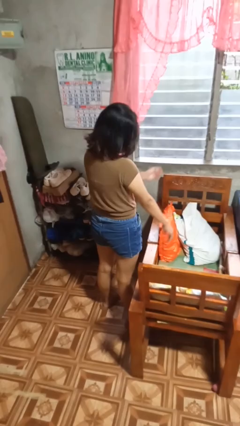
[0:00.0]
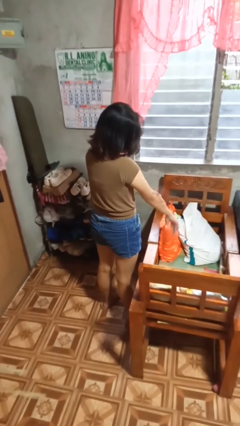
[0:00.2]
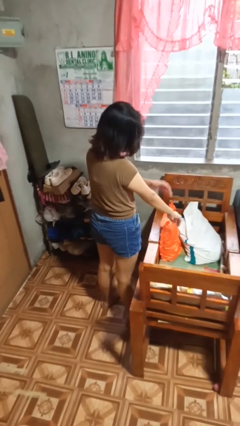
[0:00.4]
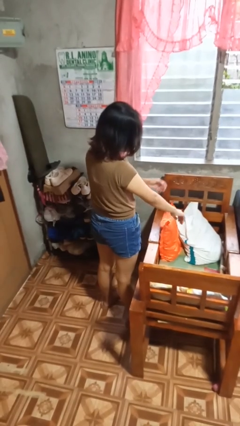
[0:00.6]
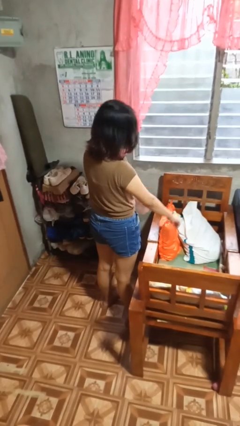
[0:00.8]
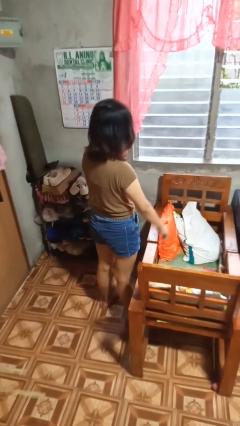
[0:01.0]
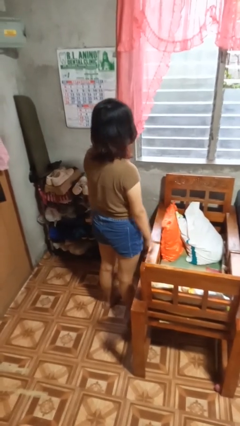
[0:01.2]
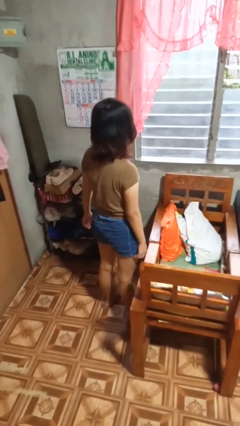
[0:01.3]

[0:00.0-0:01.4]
person swats bug

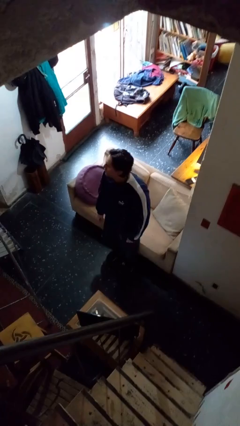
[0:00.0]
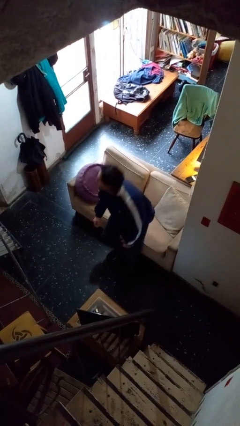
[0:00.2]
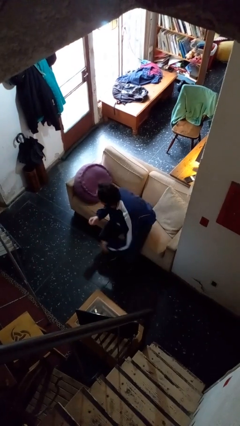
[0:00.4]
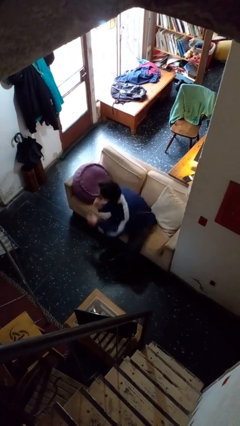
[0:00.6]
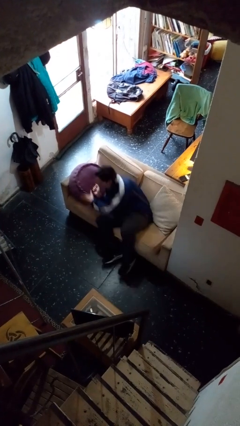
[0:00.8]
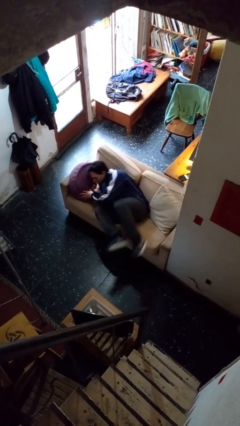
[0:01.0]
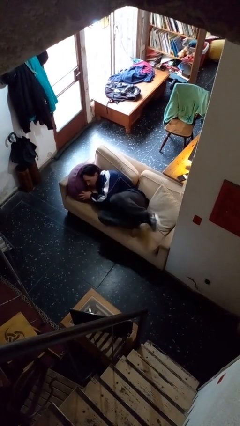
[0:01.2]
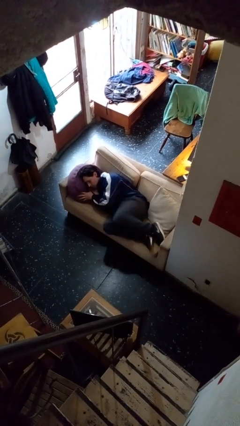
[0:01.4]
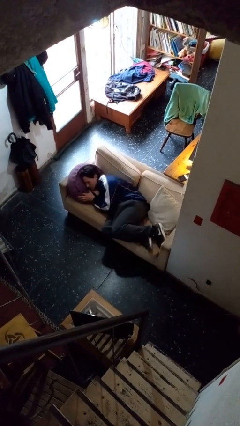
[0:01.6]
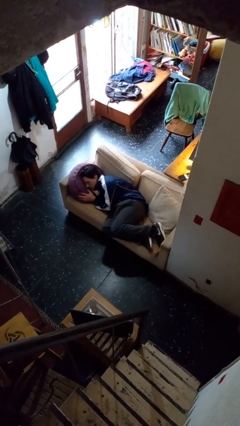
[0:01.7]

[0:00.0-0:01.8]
person lies down on couch

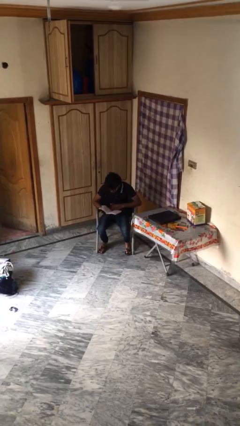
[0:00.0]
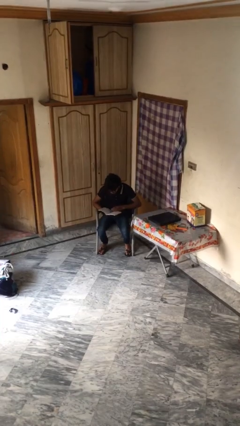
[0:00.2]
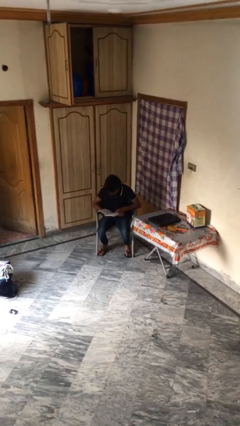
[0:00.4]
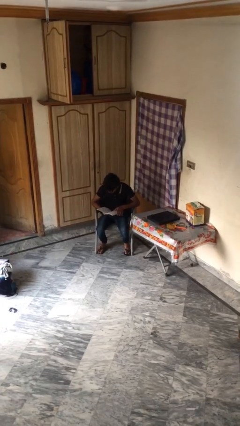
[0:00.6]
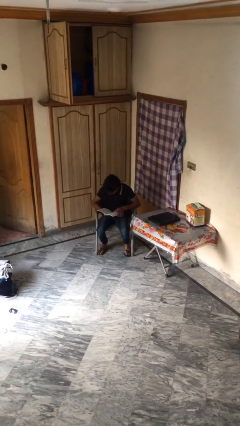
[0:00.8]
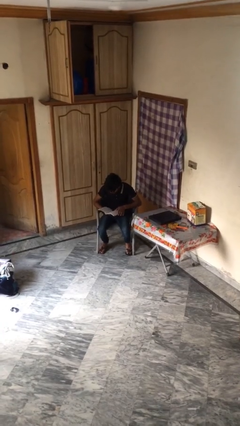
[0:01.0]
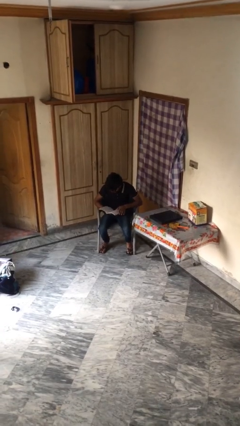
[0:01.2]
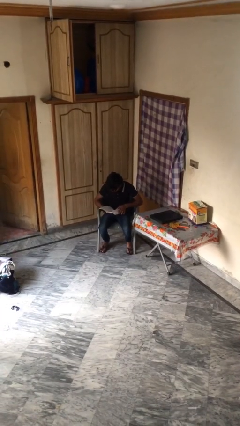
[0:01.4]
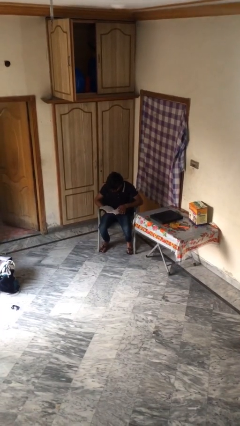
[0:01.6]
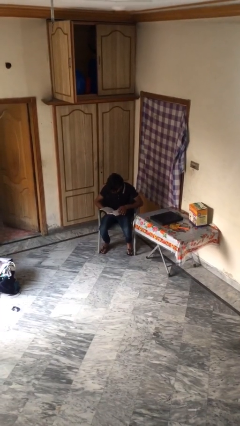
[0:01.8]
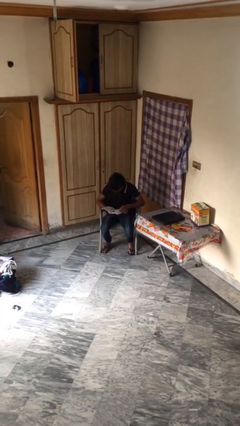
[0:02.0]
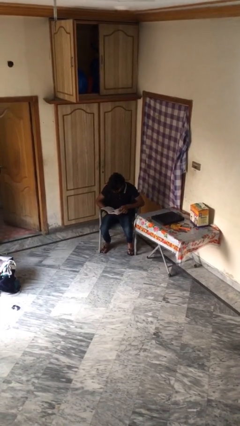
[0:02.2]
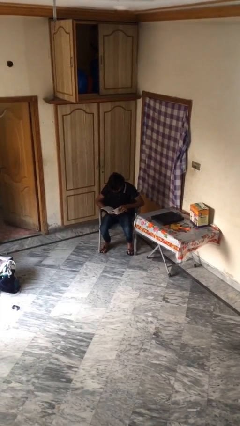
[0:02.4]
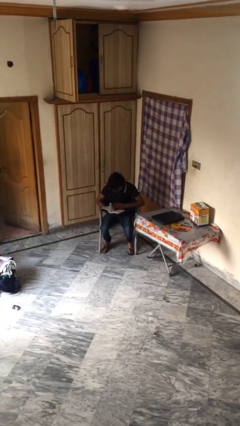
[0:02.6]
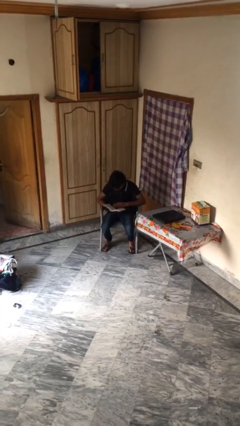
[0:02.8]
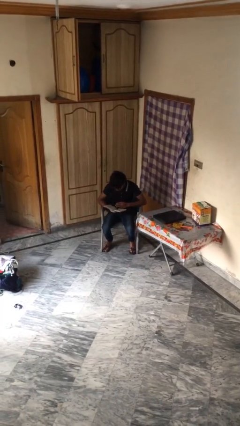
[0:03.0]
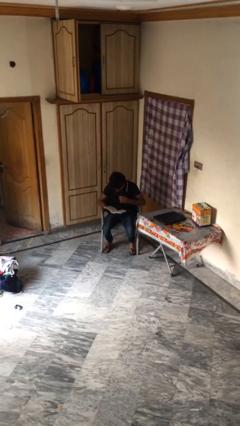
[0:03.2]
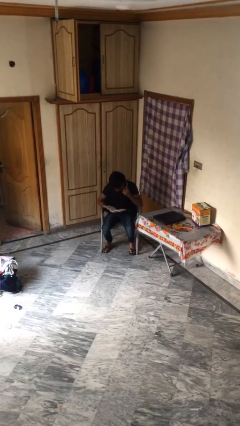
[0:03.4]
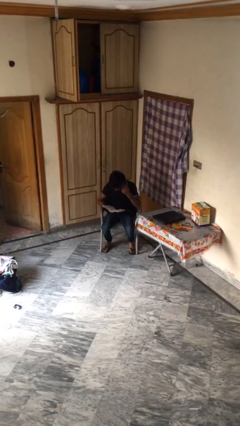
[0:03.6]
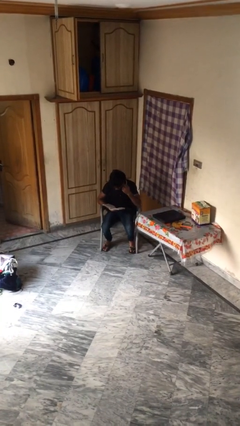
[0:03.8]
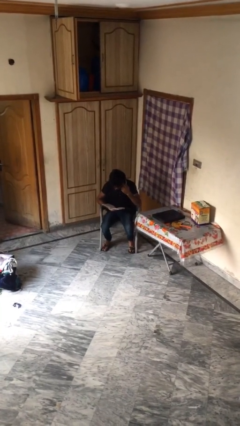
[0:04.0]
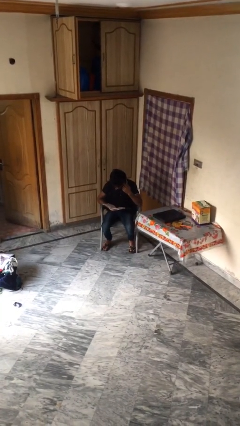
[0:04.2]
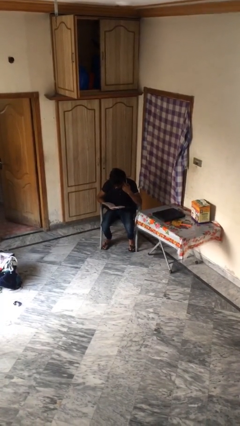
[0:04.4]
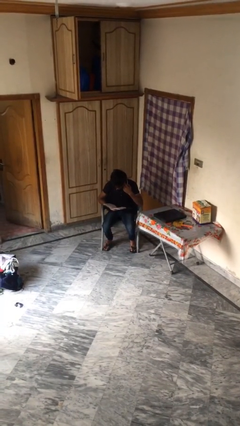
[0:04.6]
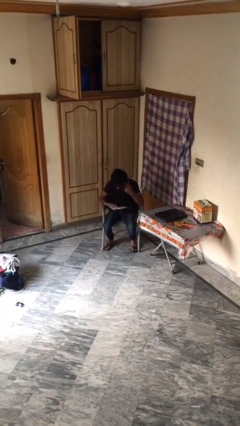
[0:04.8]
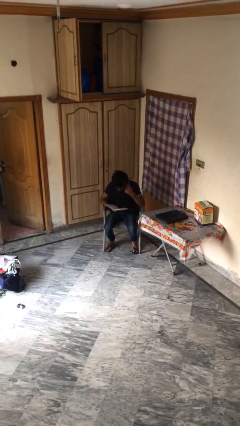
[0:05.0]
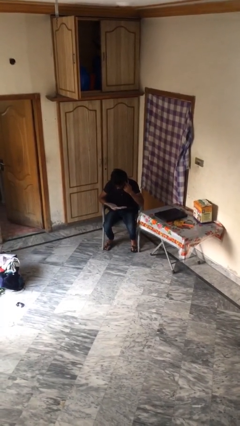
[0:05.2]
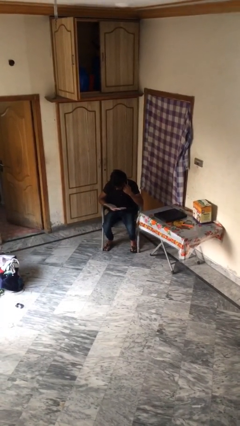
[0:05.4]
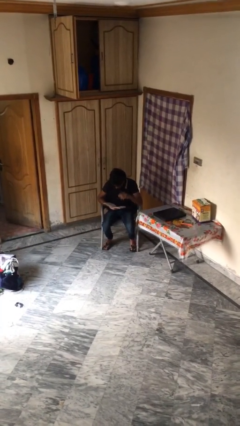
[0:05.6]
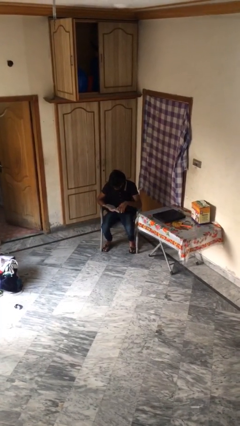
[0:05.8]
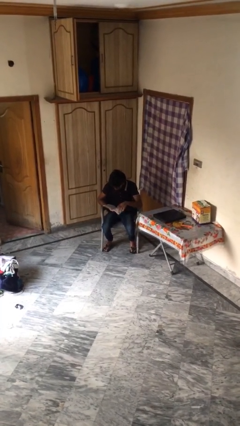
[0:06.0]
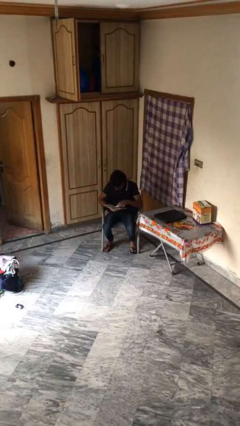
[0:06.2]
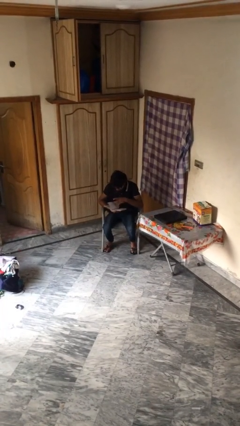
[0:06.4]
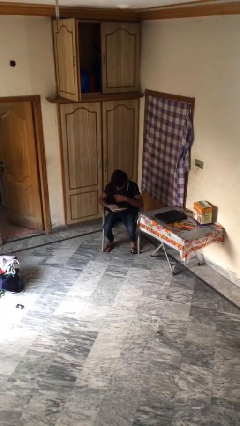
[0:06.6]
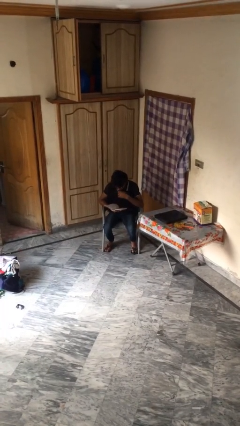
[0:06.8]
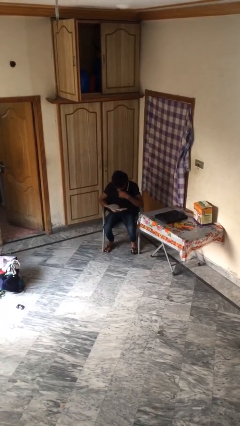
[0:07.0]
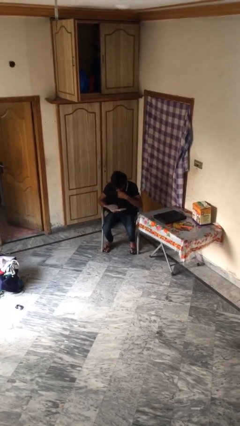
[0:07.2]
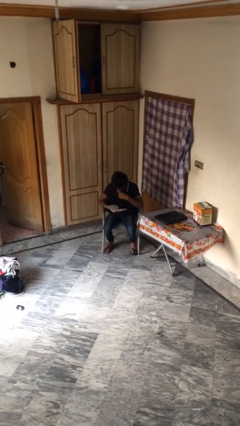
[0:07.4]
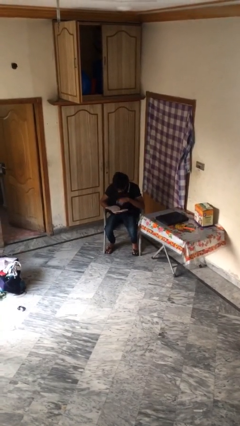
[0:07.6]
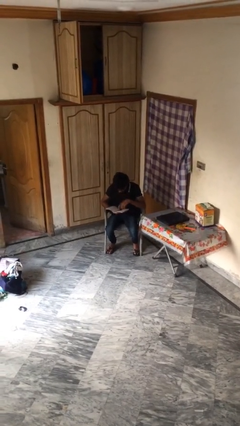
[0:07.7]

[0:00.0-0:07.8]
person reads document

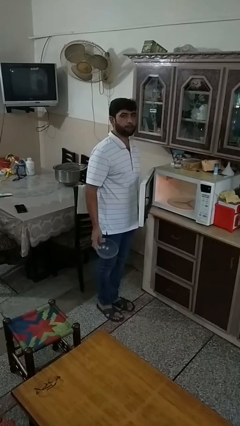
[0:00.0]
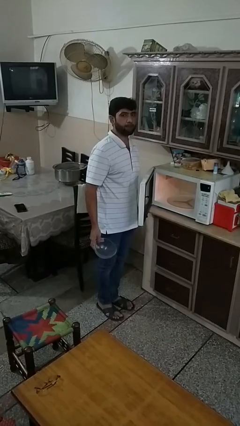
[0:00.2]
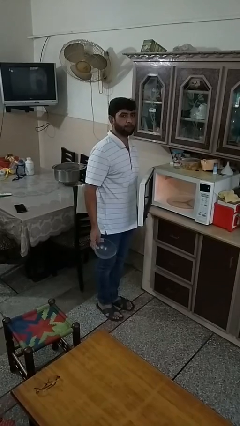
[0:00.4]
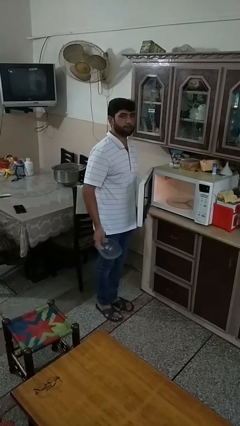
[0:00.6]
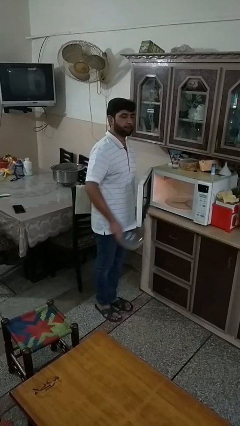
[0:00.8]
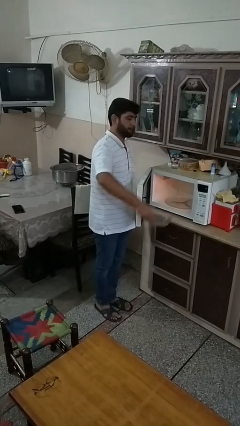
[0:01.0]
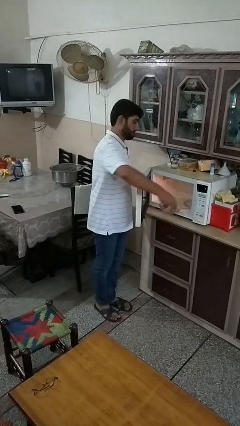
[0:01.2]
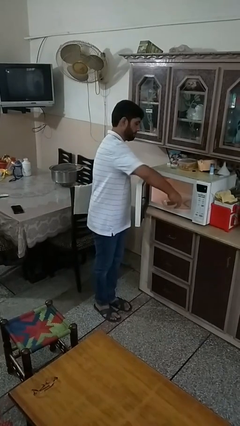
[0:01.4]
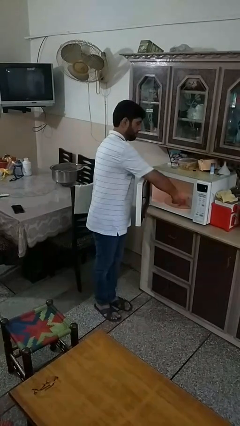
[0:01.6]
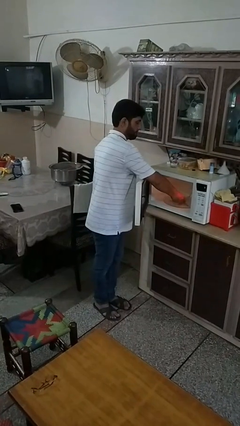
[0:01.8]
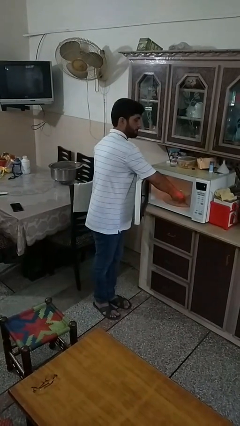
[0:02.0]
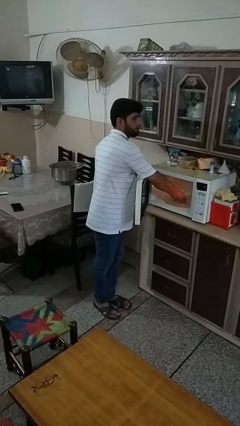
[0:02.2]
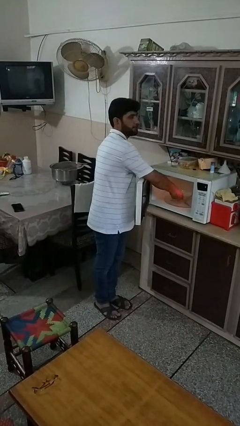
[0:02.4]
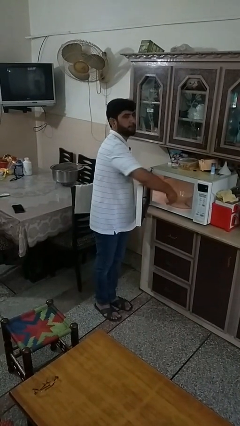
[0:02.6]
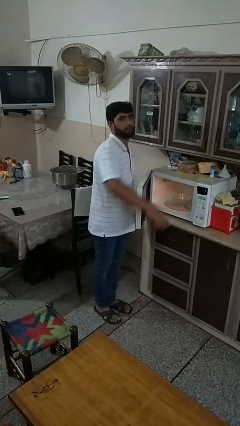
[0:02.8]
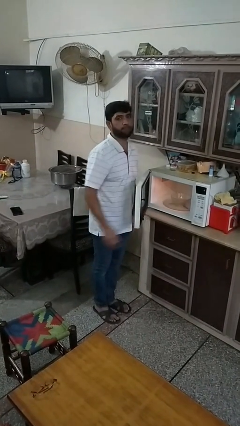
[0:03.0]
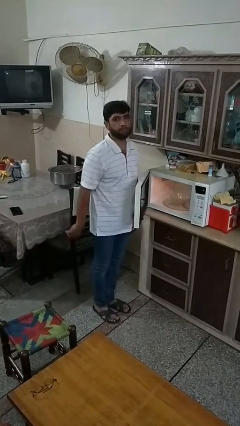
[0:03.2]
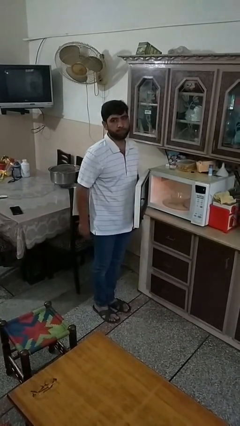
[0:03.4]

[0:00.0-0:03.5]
person puts object into microwave

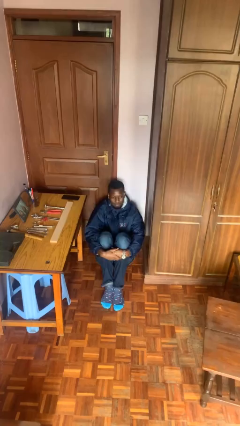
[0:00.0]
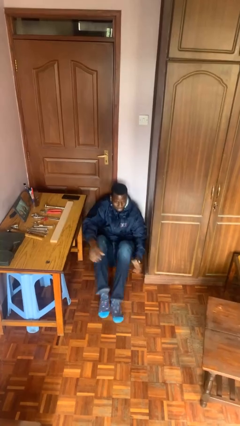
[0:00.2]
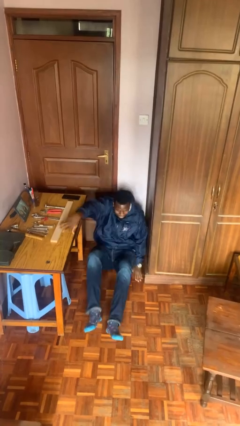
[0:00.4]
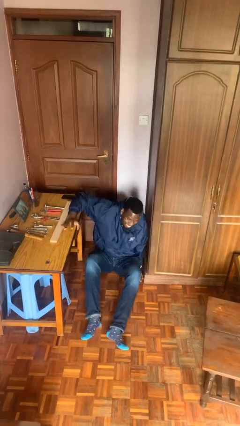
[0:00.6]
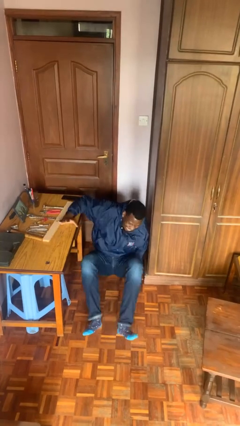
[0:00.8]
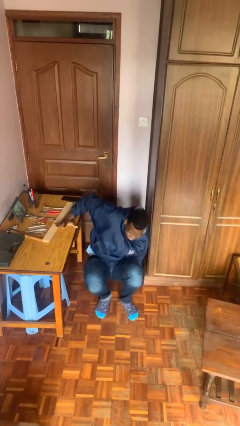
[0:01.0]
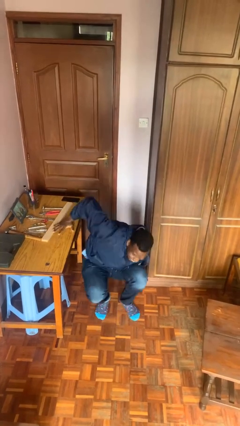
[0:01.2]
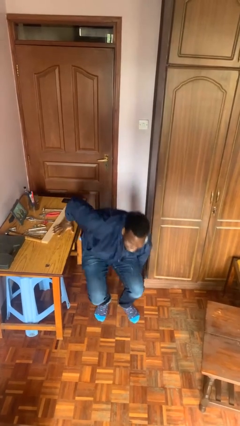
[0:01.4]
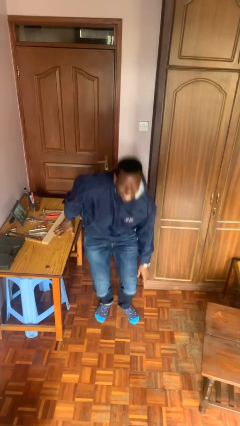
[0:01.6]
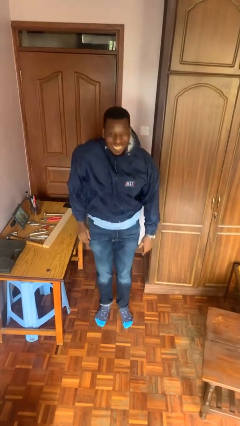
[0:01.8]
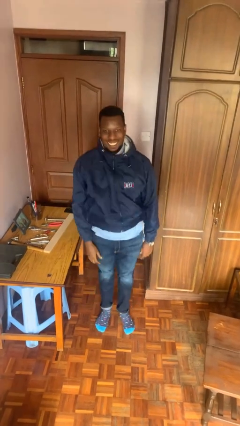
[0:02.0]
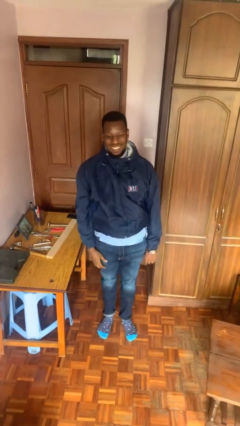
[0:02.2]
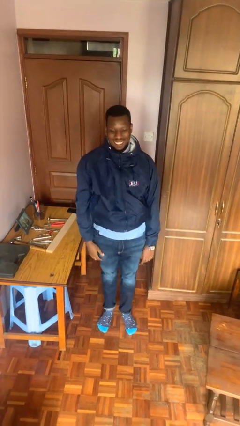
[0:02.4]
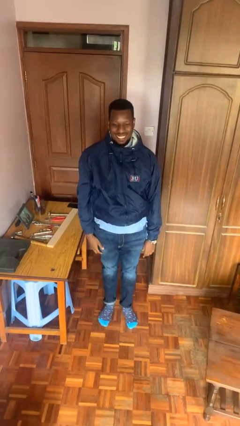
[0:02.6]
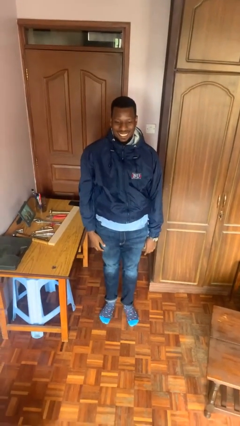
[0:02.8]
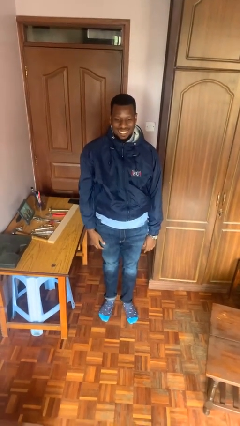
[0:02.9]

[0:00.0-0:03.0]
person stands up
